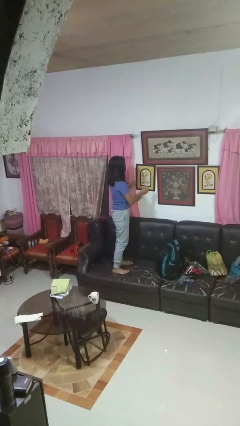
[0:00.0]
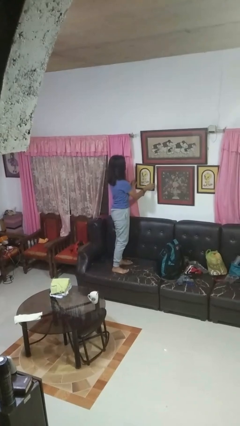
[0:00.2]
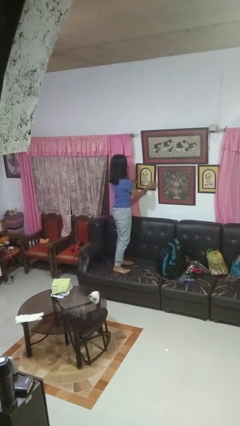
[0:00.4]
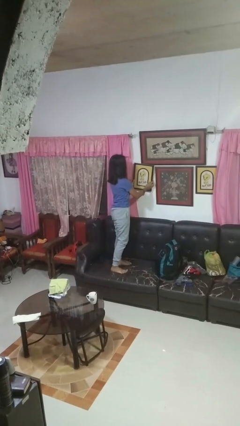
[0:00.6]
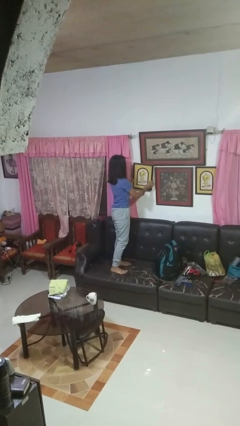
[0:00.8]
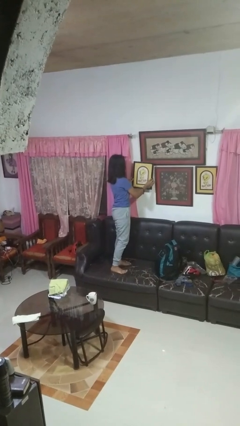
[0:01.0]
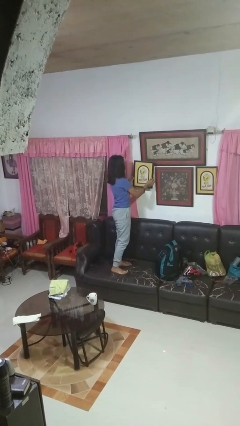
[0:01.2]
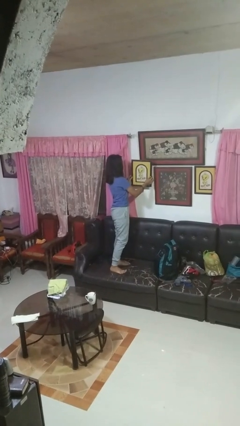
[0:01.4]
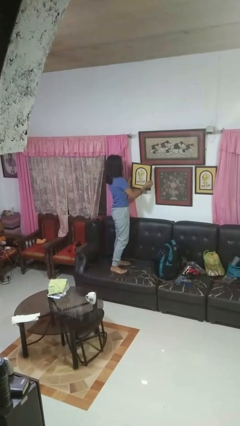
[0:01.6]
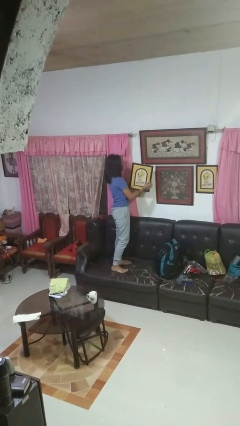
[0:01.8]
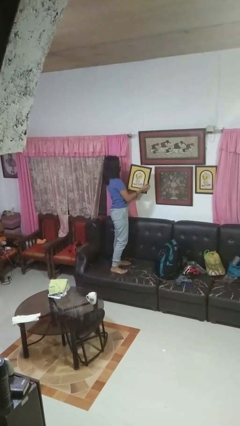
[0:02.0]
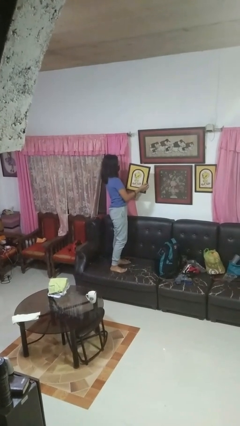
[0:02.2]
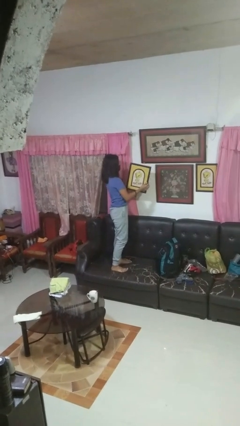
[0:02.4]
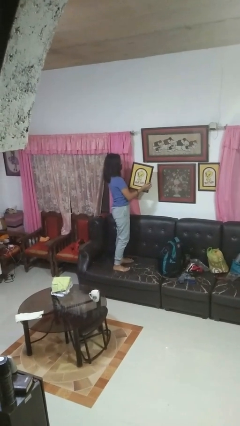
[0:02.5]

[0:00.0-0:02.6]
person takes down picture frame

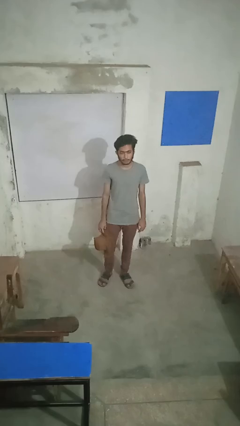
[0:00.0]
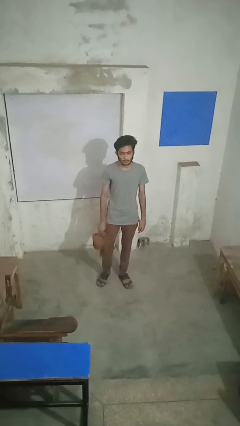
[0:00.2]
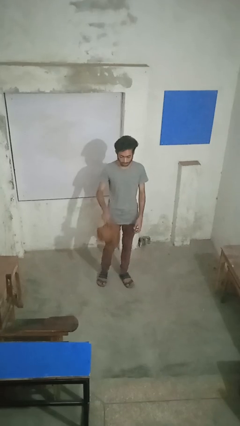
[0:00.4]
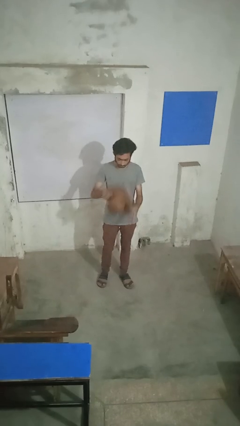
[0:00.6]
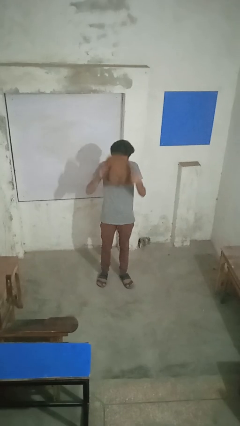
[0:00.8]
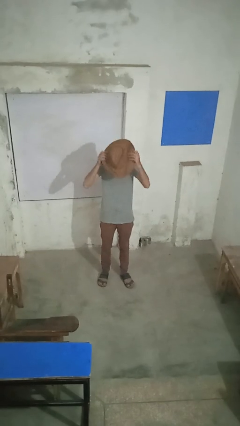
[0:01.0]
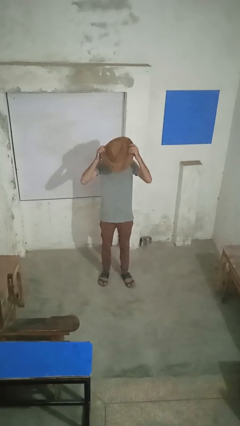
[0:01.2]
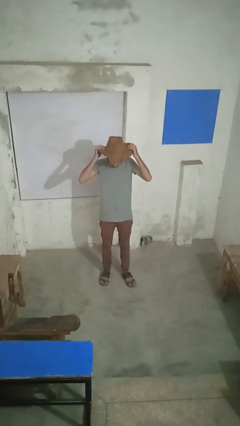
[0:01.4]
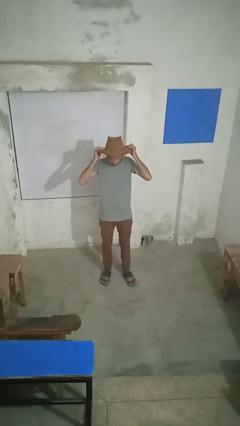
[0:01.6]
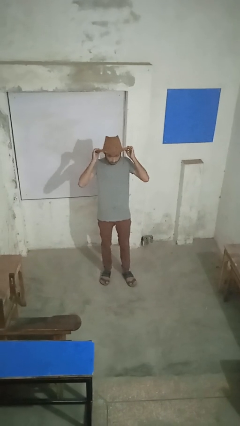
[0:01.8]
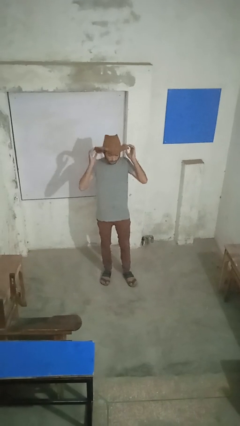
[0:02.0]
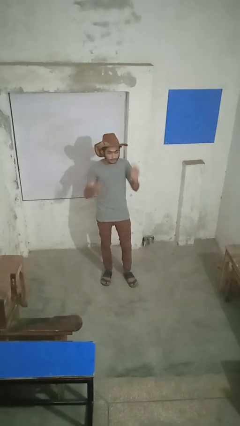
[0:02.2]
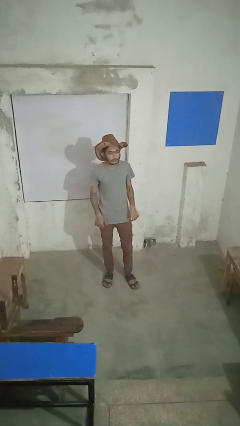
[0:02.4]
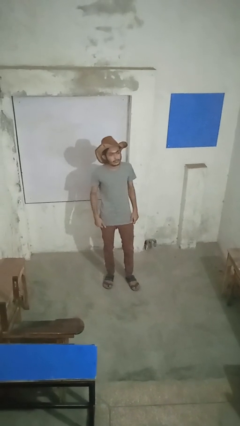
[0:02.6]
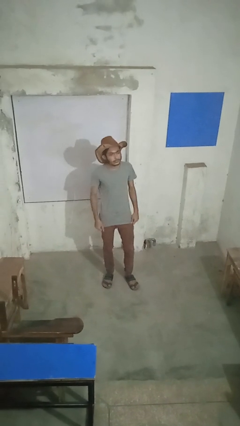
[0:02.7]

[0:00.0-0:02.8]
person puts on hat

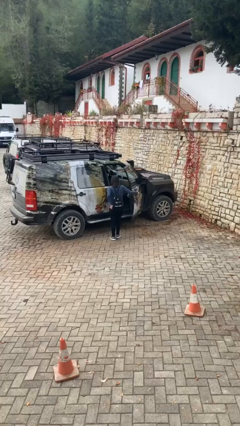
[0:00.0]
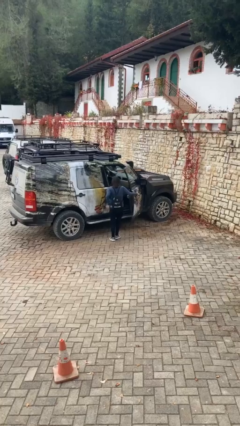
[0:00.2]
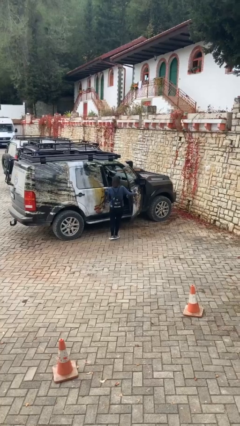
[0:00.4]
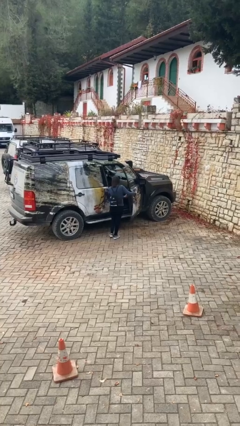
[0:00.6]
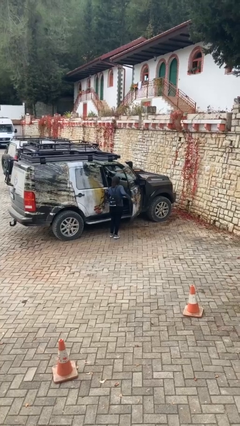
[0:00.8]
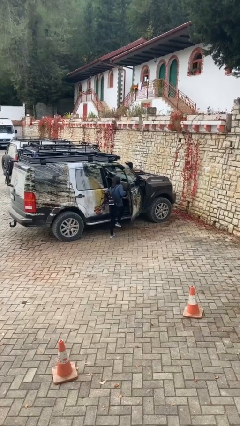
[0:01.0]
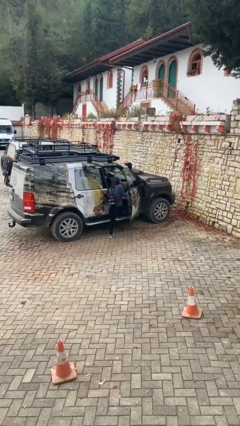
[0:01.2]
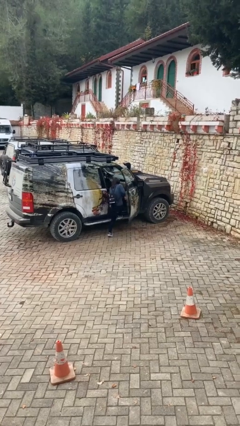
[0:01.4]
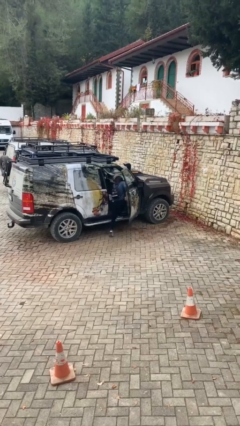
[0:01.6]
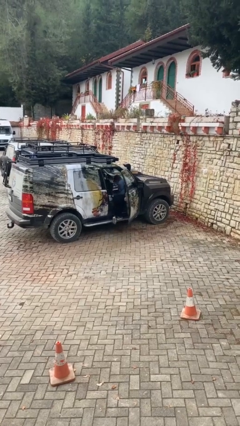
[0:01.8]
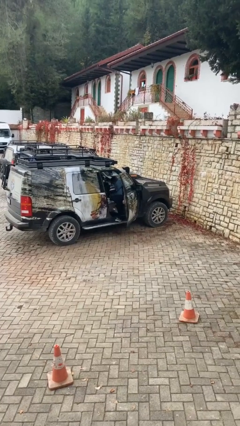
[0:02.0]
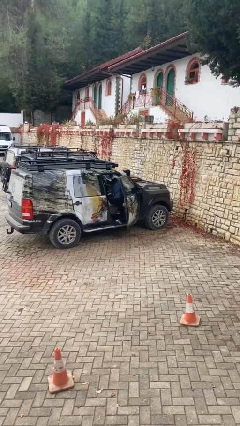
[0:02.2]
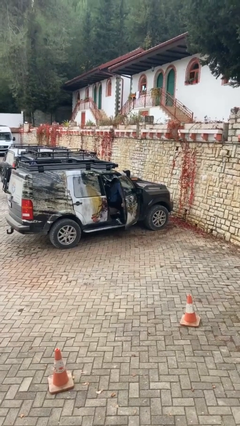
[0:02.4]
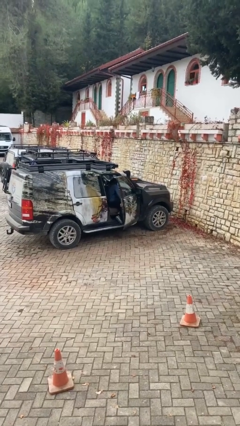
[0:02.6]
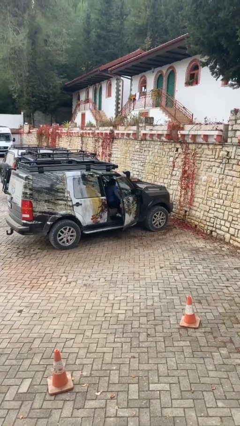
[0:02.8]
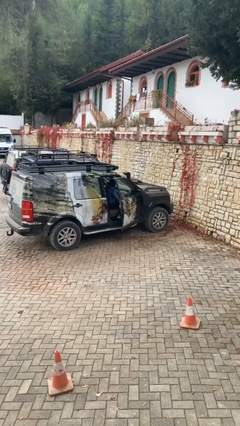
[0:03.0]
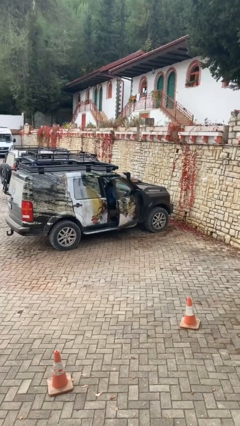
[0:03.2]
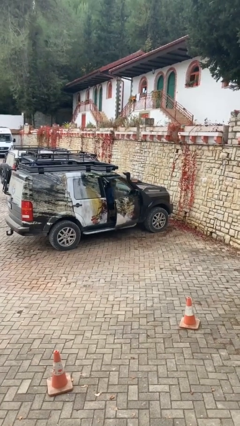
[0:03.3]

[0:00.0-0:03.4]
person enters car

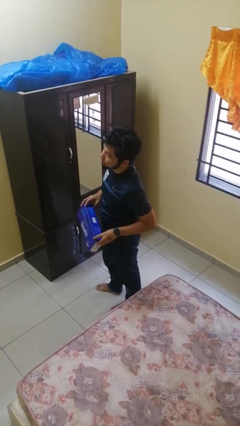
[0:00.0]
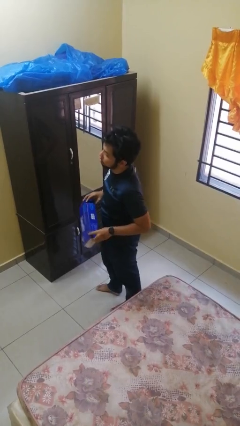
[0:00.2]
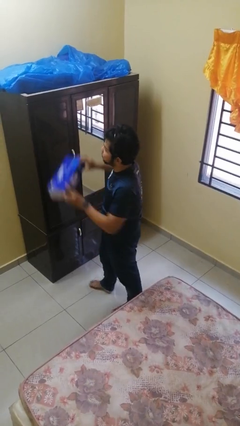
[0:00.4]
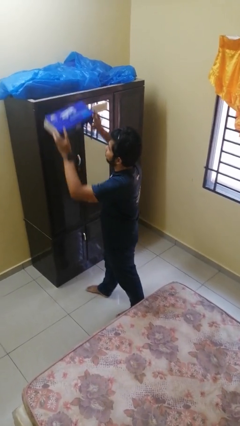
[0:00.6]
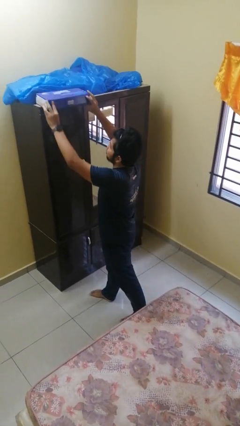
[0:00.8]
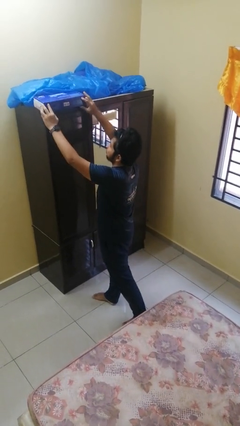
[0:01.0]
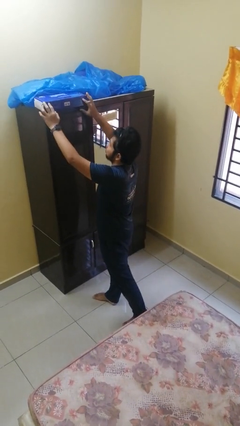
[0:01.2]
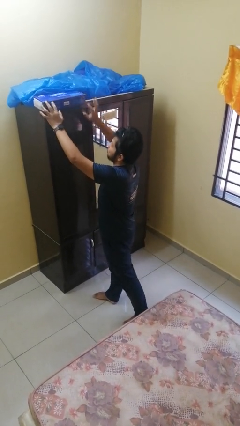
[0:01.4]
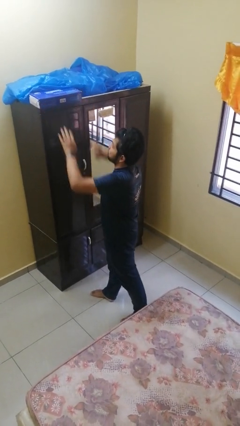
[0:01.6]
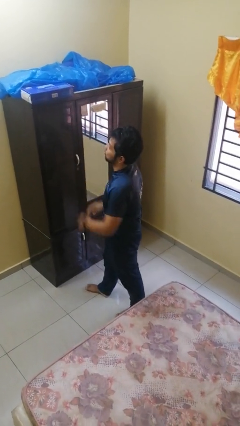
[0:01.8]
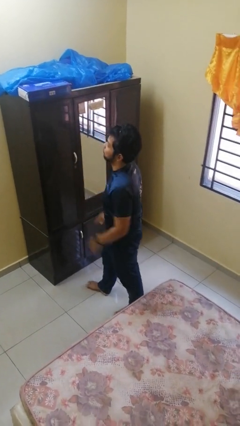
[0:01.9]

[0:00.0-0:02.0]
person puts down object on countertop

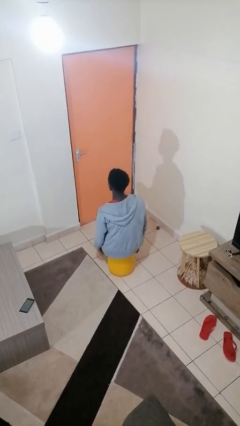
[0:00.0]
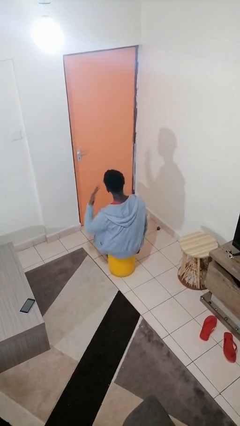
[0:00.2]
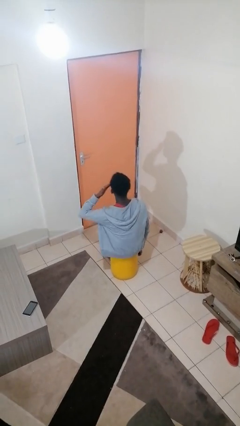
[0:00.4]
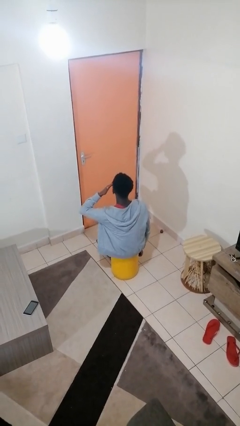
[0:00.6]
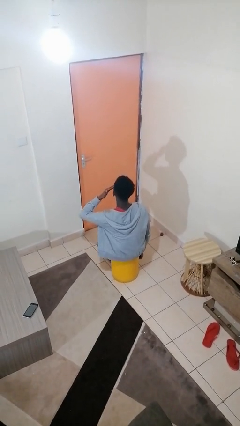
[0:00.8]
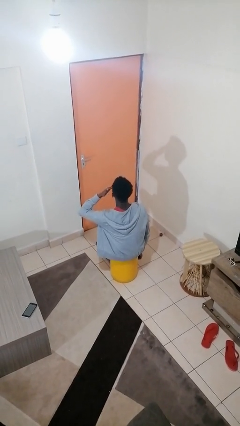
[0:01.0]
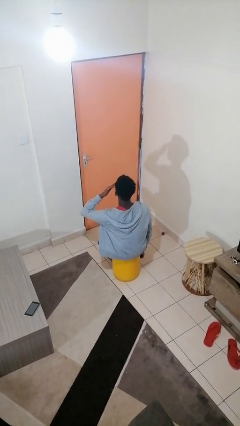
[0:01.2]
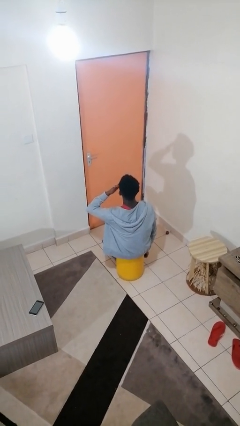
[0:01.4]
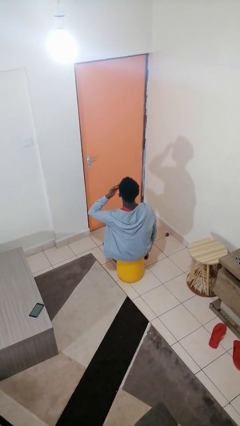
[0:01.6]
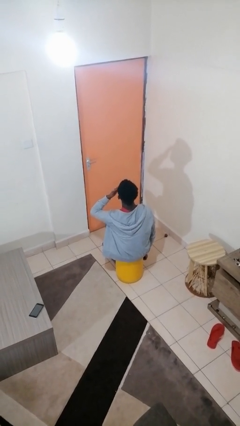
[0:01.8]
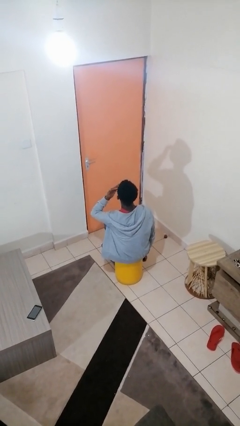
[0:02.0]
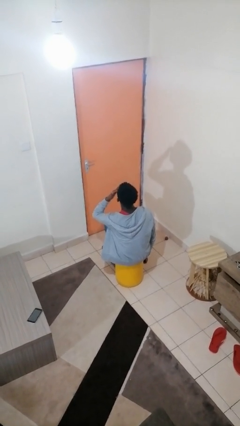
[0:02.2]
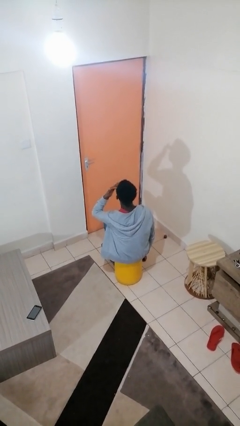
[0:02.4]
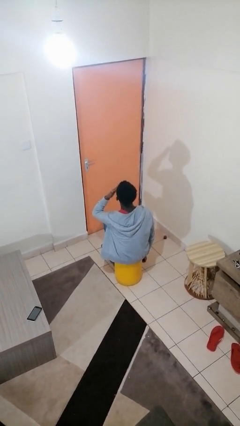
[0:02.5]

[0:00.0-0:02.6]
person rubs eyes

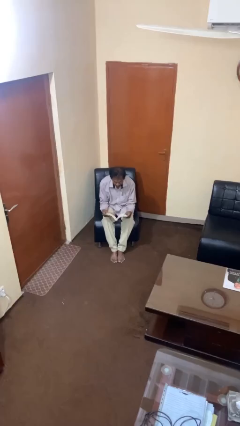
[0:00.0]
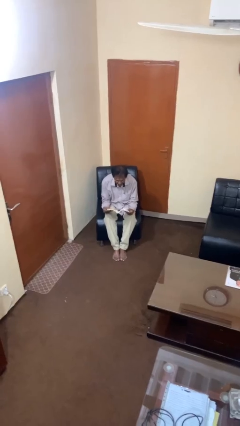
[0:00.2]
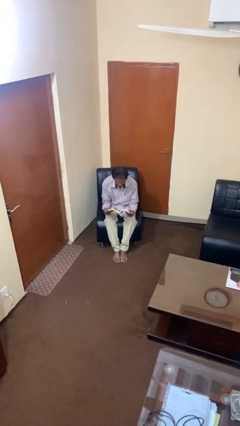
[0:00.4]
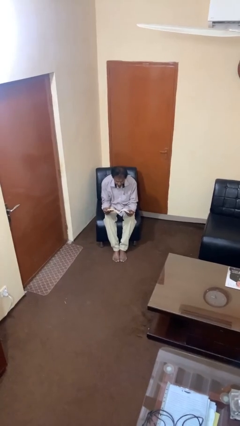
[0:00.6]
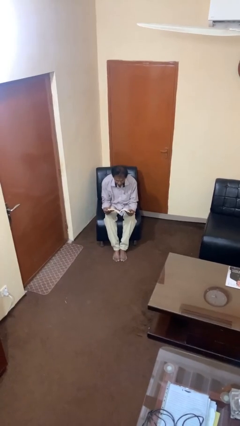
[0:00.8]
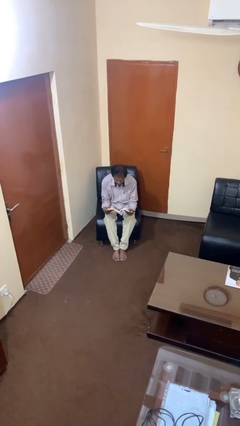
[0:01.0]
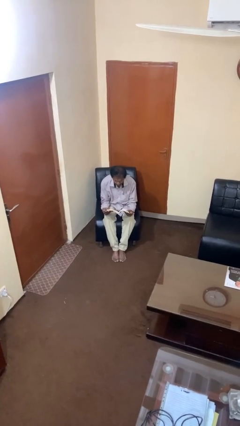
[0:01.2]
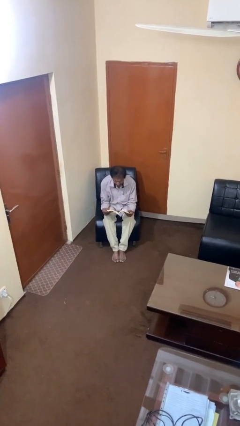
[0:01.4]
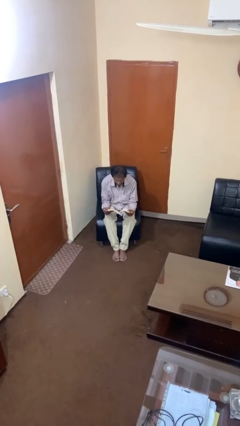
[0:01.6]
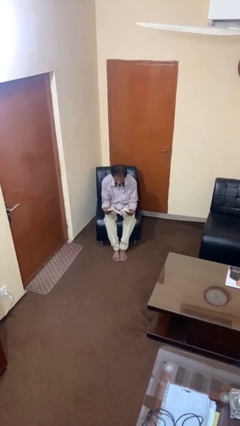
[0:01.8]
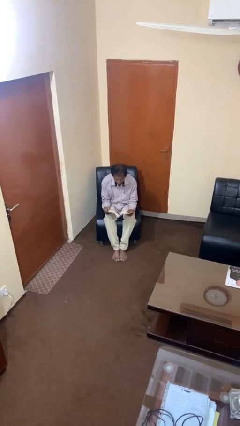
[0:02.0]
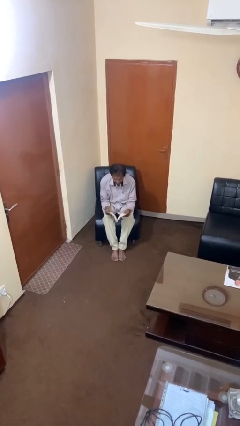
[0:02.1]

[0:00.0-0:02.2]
person reads book

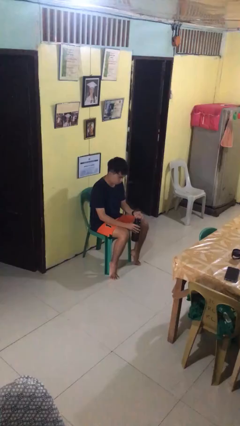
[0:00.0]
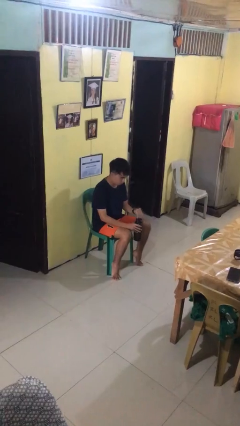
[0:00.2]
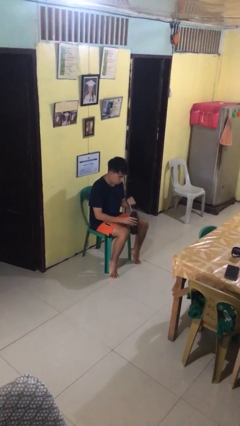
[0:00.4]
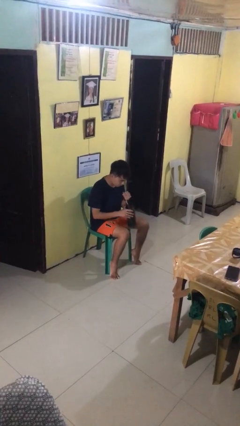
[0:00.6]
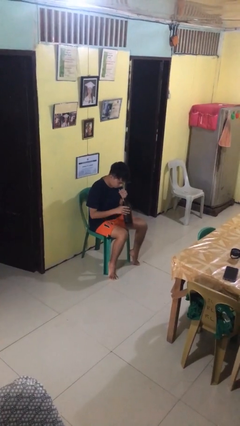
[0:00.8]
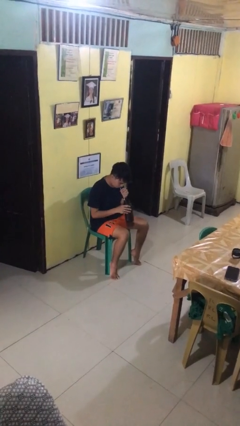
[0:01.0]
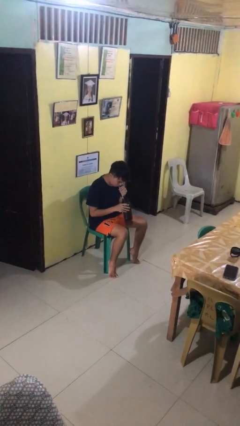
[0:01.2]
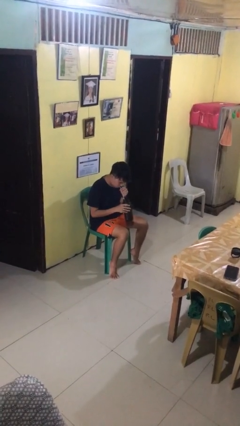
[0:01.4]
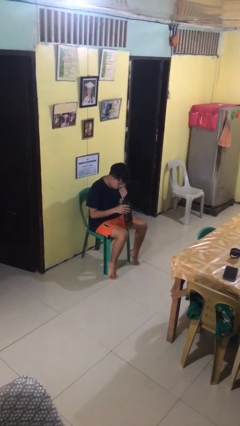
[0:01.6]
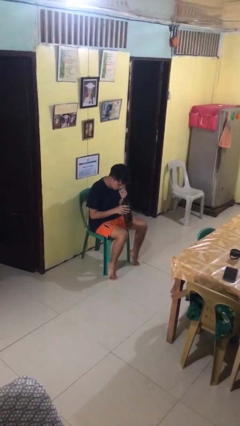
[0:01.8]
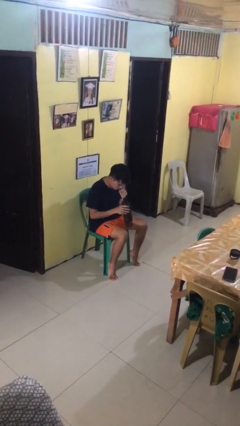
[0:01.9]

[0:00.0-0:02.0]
person drinks from straw
